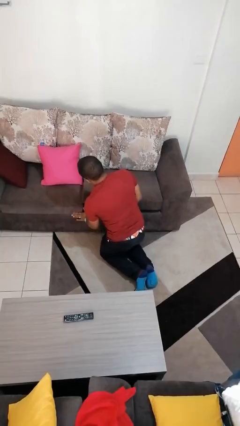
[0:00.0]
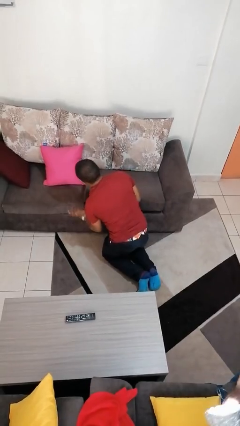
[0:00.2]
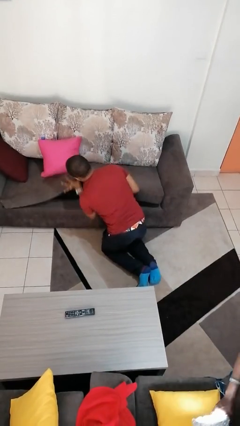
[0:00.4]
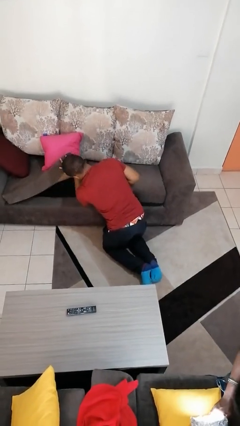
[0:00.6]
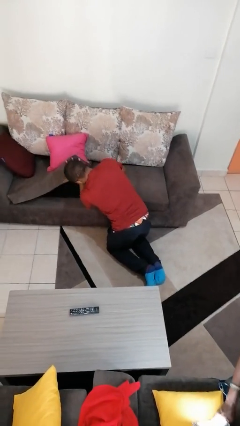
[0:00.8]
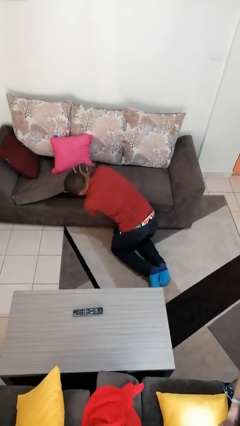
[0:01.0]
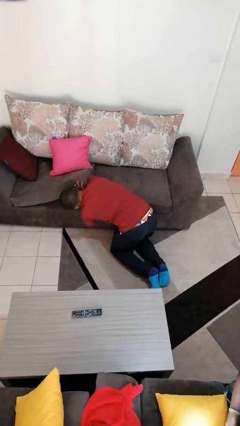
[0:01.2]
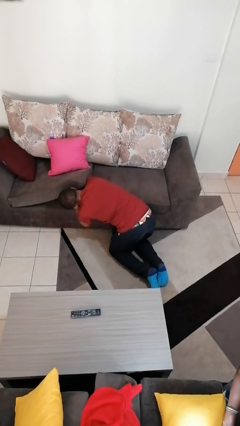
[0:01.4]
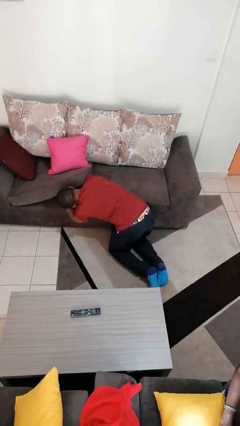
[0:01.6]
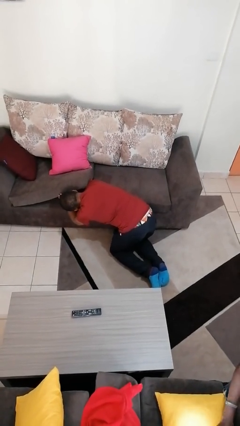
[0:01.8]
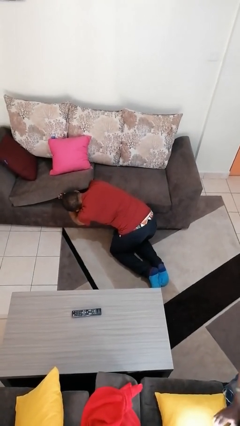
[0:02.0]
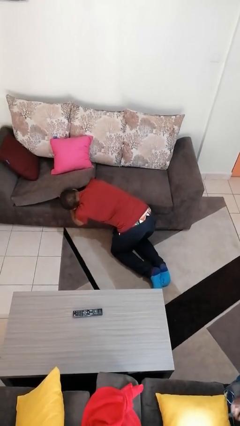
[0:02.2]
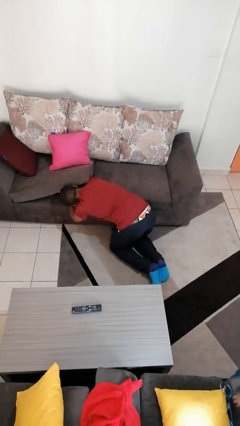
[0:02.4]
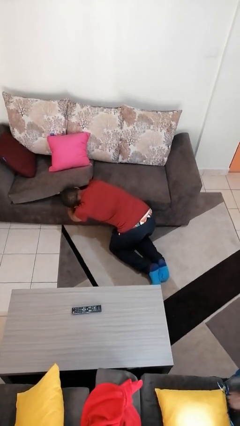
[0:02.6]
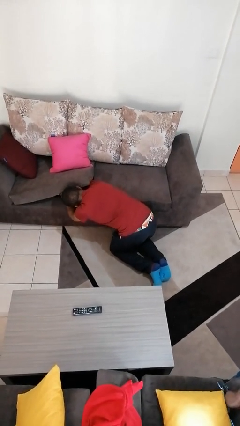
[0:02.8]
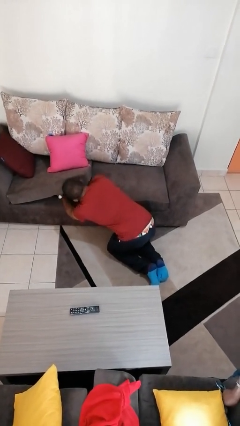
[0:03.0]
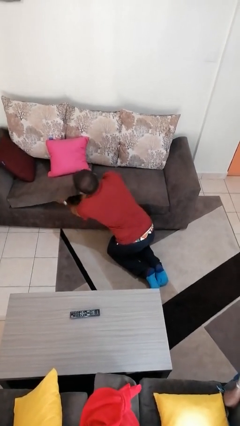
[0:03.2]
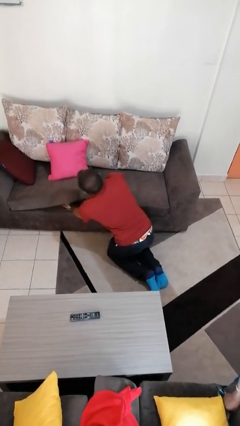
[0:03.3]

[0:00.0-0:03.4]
person searches under couch

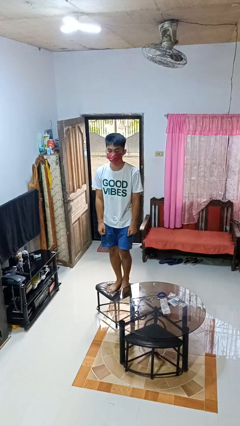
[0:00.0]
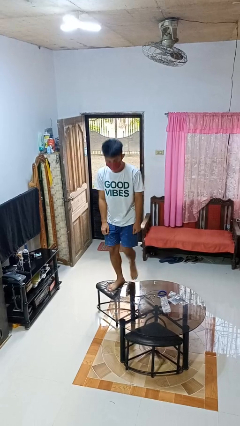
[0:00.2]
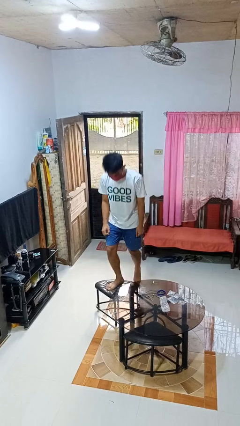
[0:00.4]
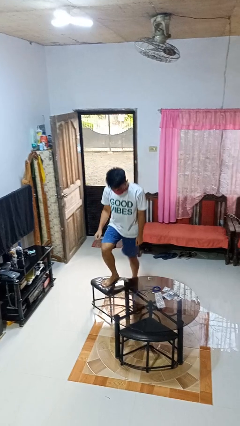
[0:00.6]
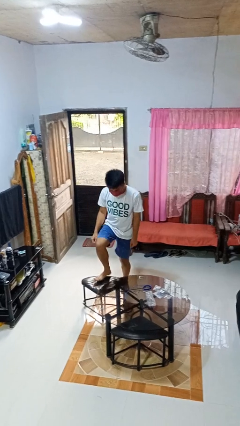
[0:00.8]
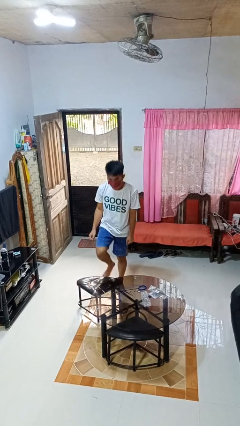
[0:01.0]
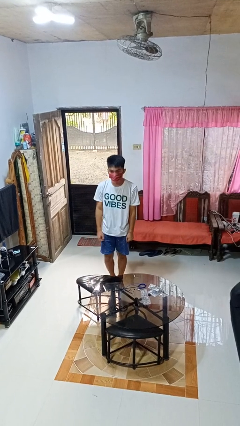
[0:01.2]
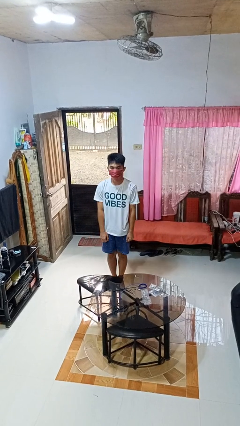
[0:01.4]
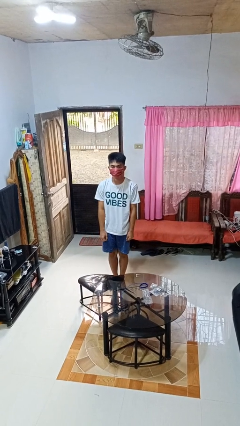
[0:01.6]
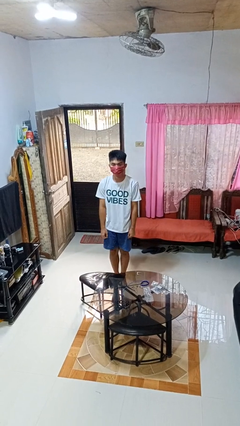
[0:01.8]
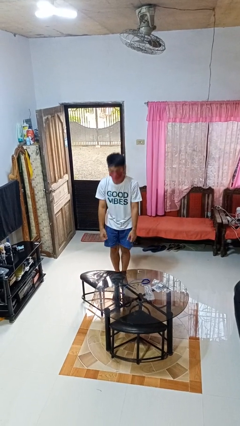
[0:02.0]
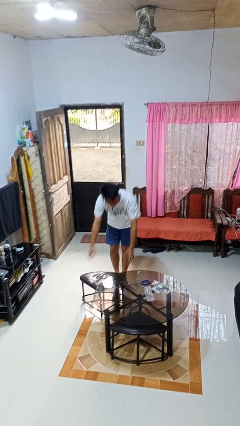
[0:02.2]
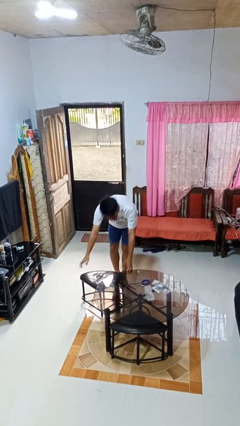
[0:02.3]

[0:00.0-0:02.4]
person climbs off chair

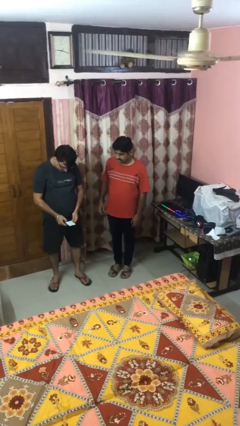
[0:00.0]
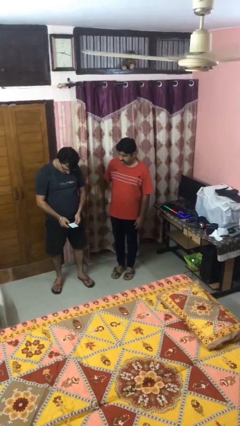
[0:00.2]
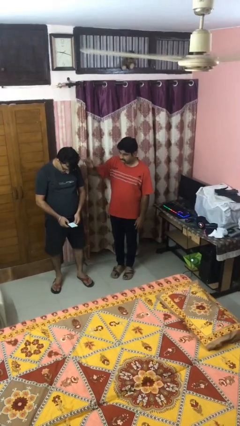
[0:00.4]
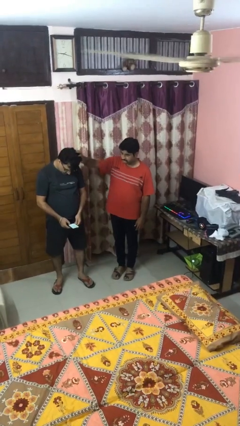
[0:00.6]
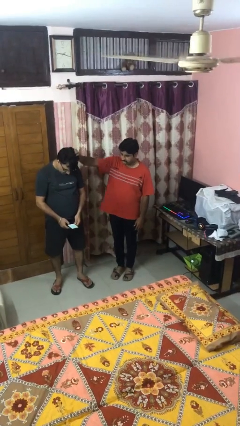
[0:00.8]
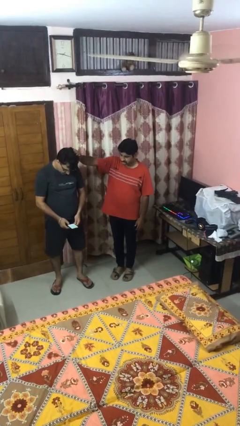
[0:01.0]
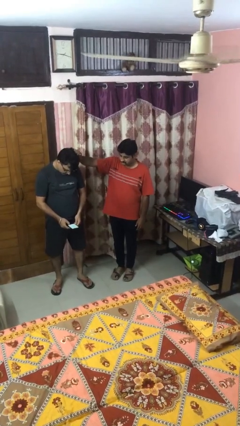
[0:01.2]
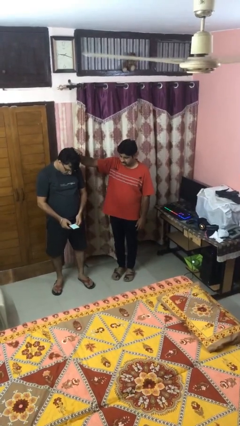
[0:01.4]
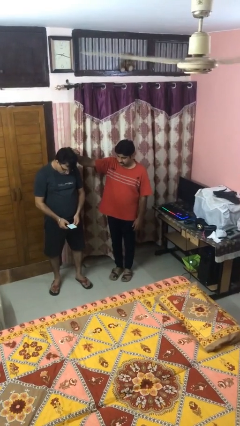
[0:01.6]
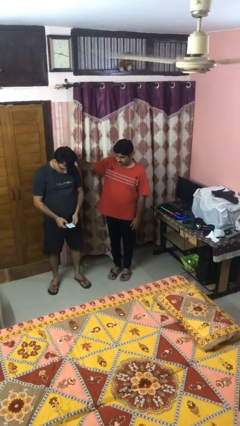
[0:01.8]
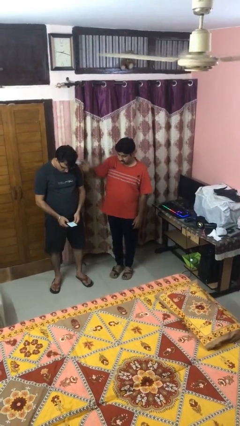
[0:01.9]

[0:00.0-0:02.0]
person grabs person by hair

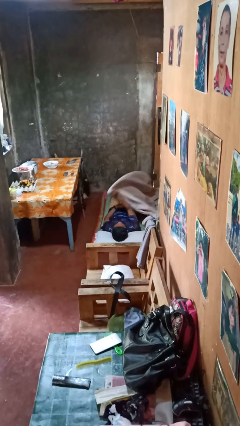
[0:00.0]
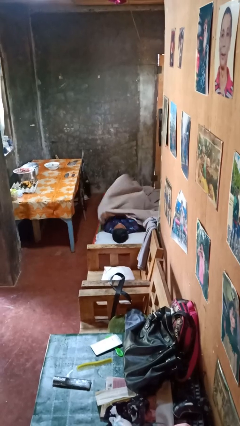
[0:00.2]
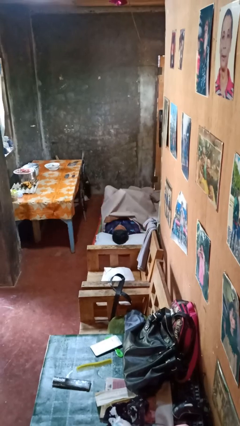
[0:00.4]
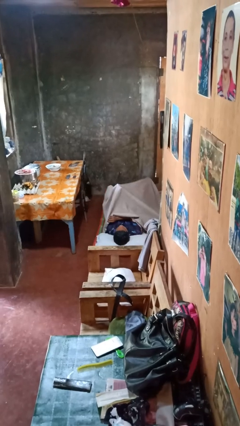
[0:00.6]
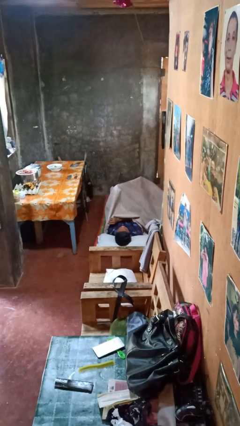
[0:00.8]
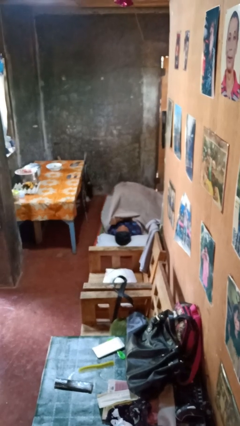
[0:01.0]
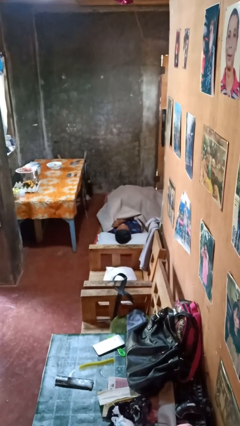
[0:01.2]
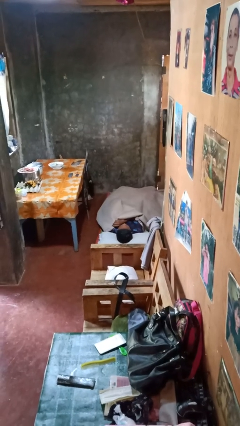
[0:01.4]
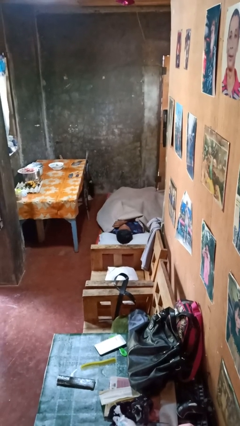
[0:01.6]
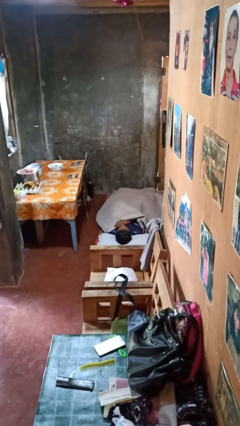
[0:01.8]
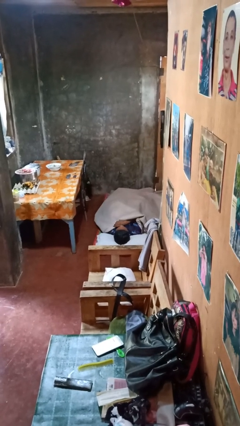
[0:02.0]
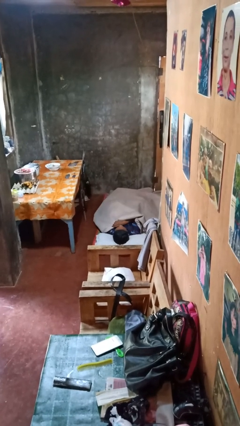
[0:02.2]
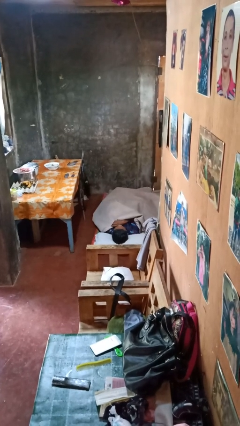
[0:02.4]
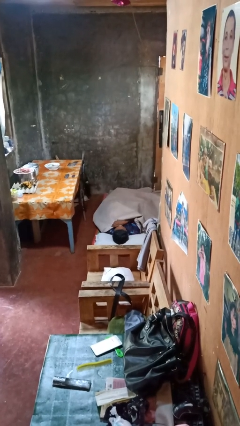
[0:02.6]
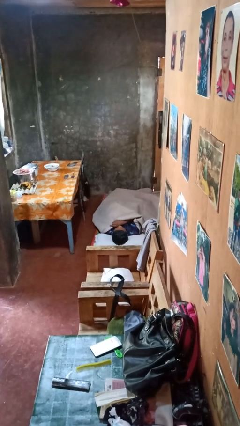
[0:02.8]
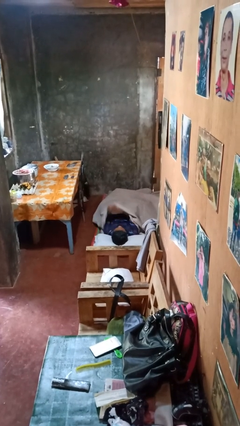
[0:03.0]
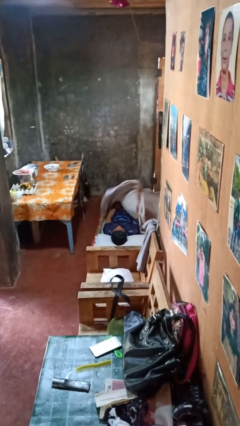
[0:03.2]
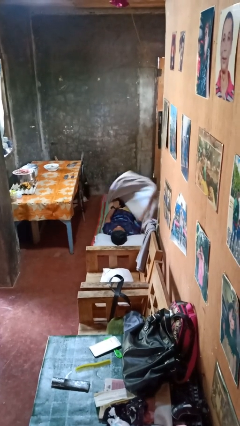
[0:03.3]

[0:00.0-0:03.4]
person covers with bedsheets

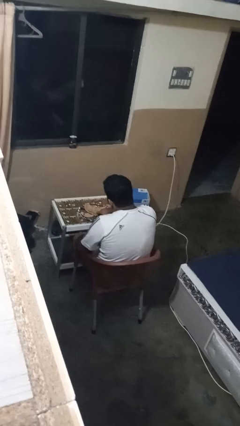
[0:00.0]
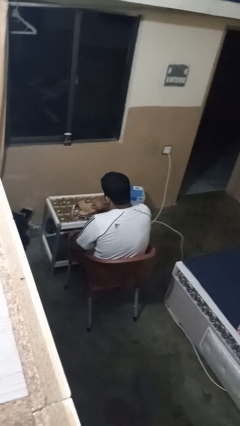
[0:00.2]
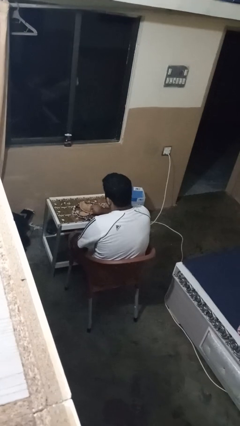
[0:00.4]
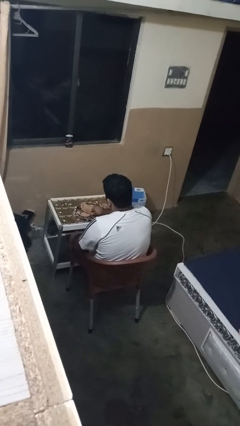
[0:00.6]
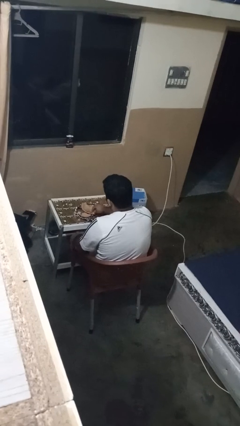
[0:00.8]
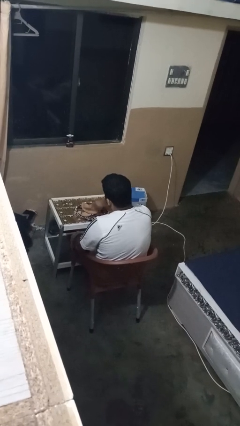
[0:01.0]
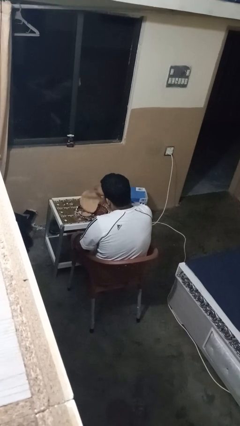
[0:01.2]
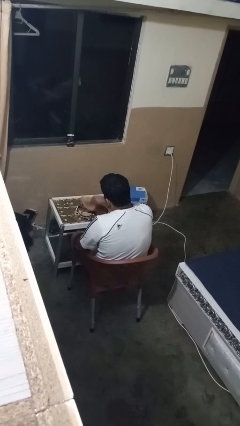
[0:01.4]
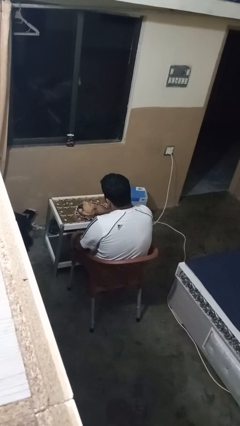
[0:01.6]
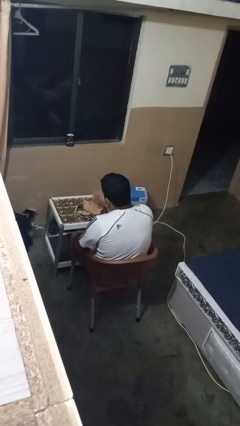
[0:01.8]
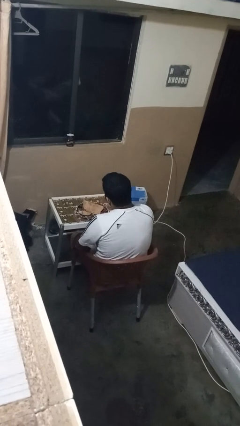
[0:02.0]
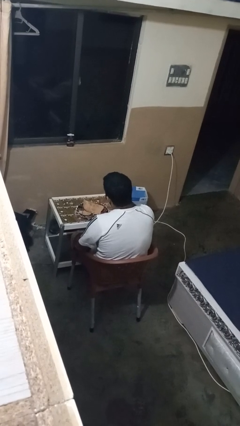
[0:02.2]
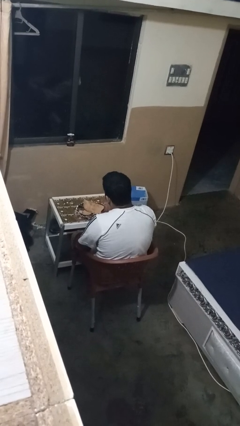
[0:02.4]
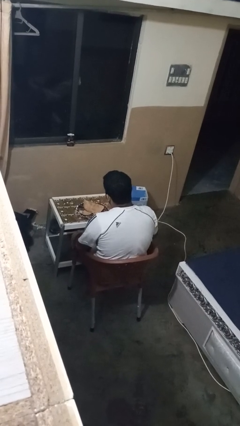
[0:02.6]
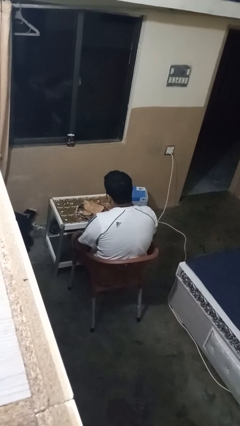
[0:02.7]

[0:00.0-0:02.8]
person eats with hands

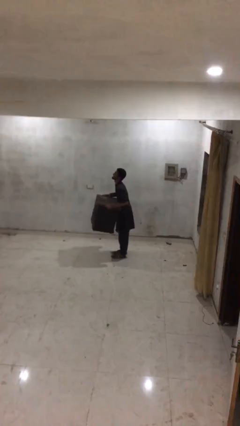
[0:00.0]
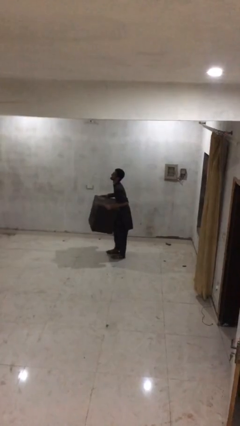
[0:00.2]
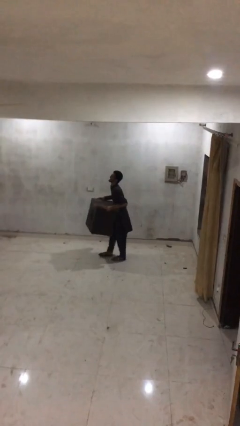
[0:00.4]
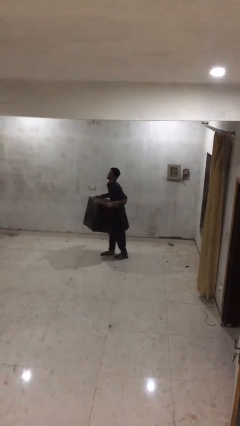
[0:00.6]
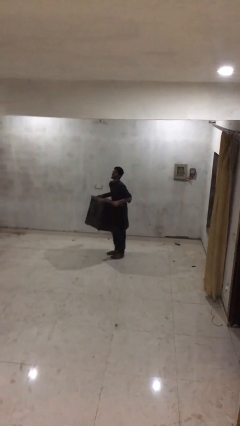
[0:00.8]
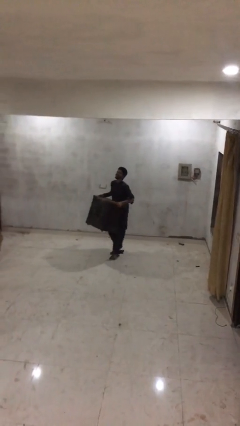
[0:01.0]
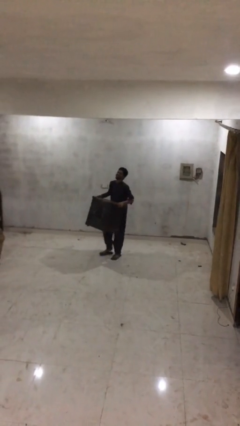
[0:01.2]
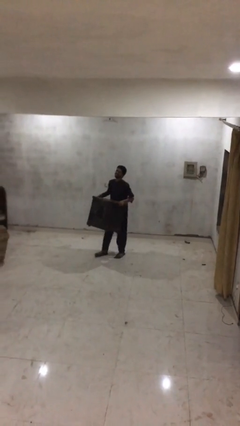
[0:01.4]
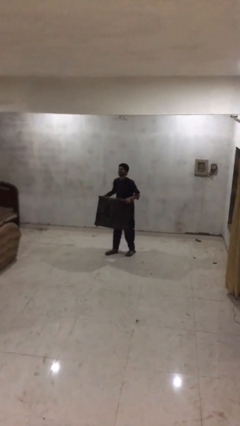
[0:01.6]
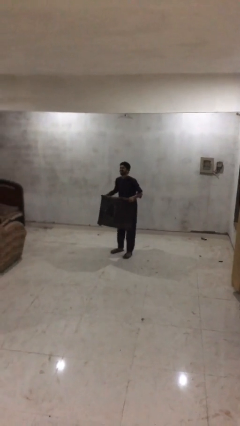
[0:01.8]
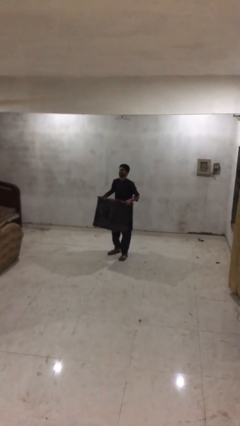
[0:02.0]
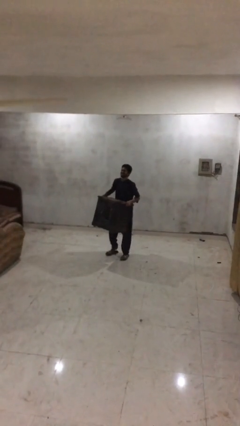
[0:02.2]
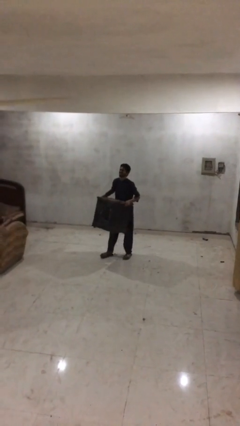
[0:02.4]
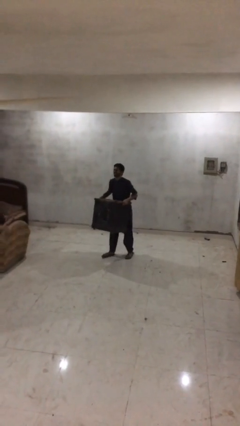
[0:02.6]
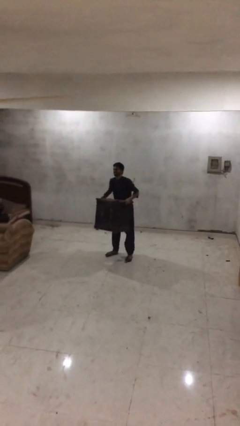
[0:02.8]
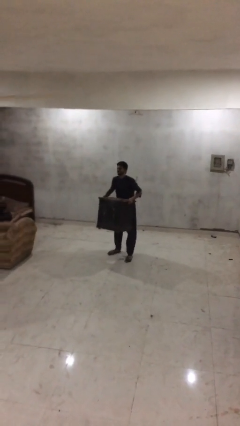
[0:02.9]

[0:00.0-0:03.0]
person carries heavy object

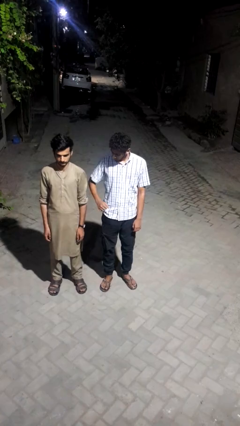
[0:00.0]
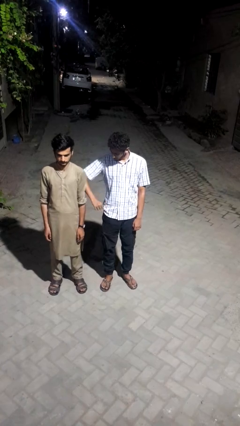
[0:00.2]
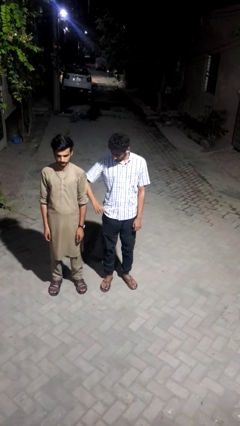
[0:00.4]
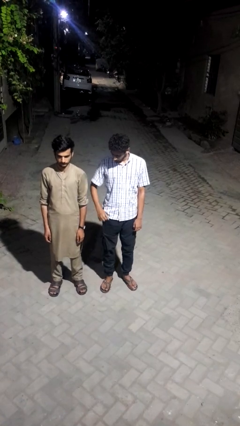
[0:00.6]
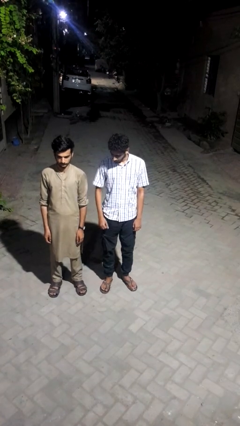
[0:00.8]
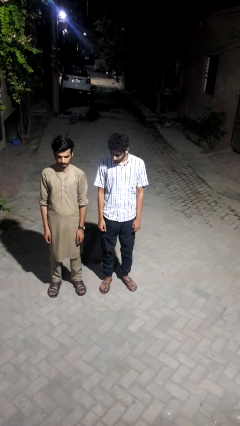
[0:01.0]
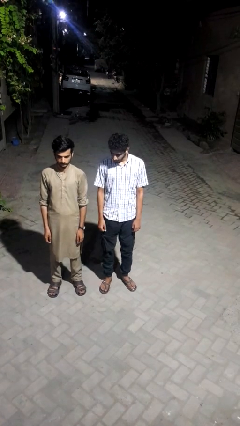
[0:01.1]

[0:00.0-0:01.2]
person nudges person with elbow
